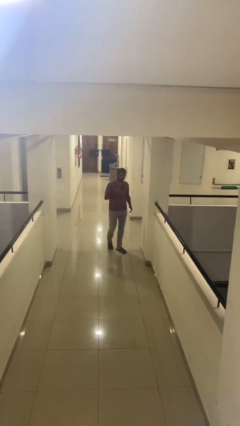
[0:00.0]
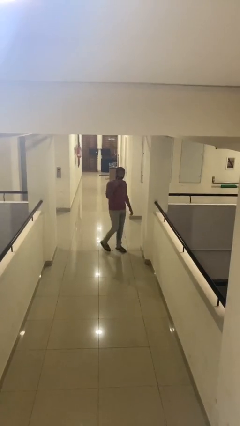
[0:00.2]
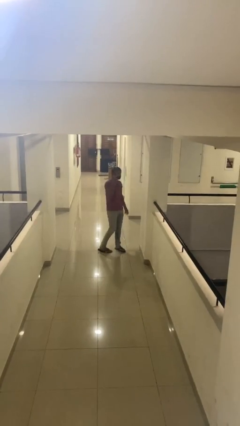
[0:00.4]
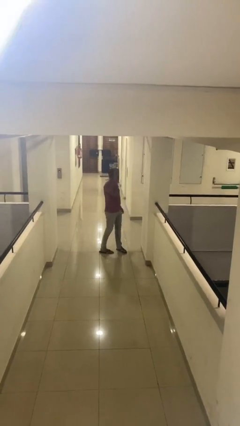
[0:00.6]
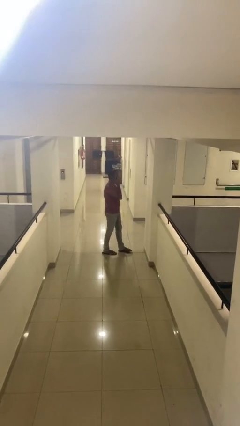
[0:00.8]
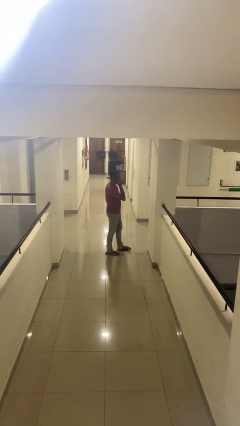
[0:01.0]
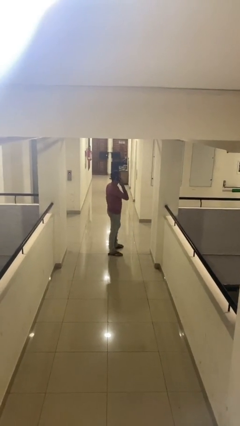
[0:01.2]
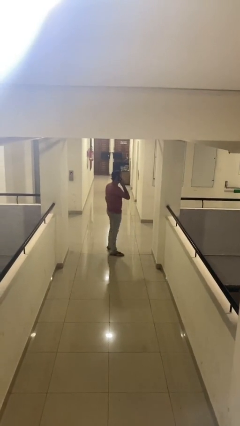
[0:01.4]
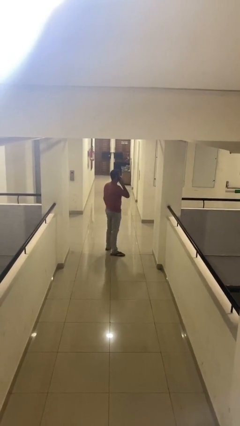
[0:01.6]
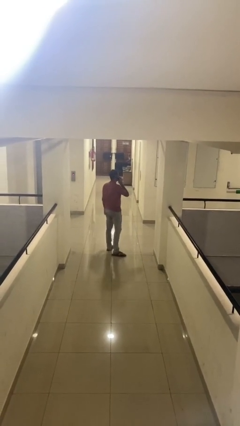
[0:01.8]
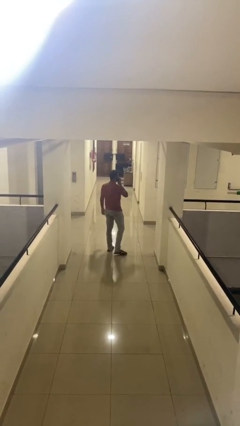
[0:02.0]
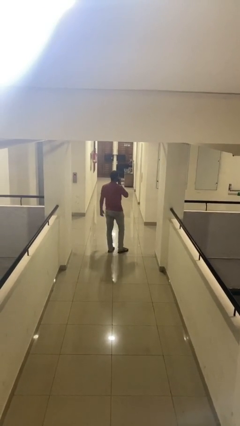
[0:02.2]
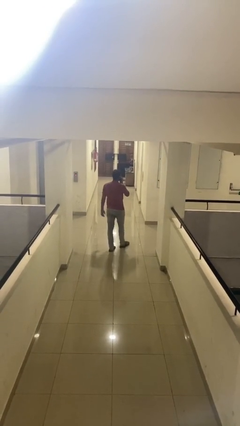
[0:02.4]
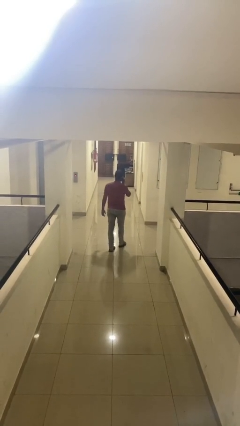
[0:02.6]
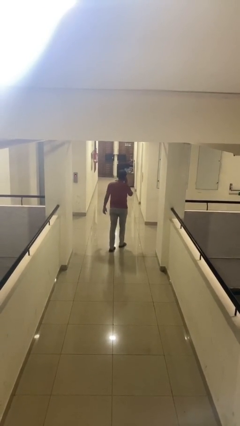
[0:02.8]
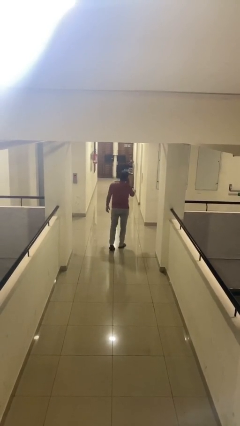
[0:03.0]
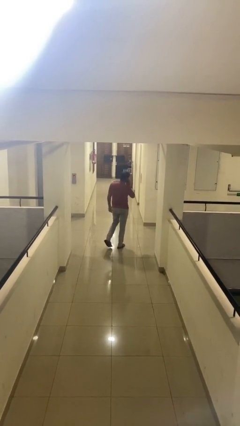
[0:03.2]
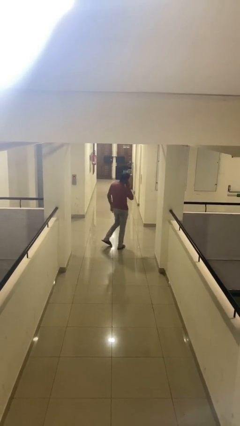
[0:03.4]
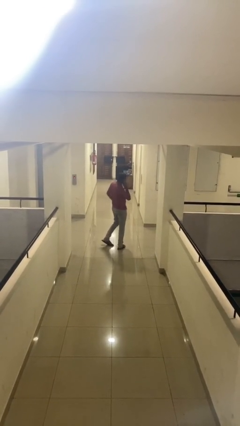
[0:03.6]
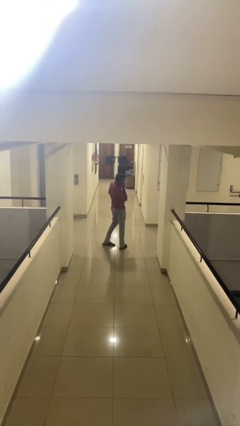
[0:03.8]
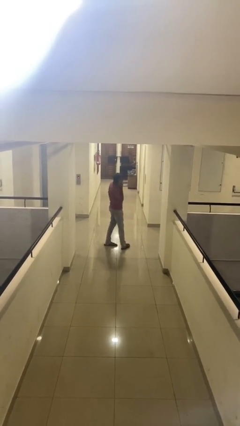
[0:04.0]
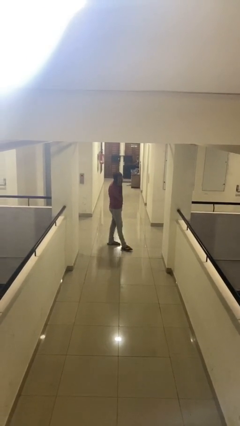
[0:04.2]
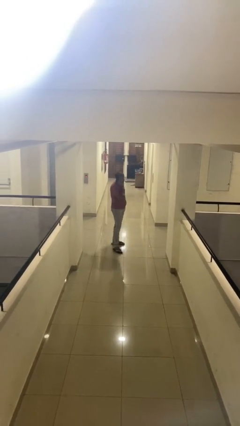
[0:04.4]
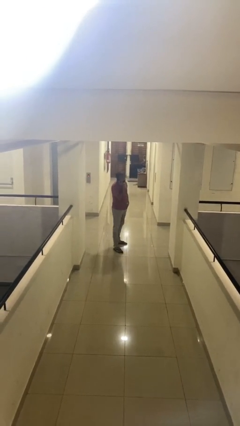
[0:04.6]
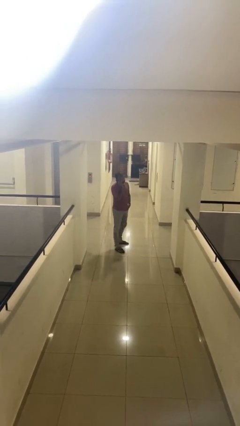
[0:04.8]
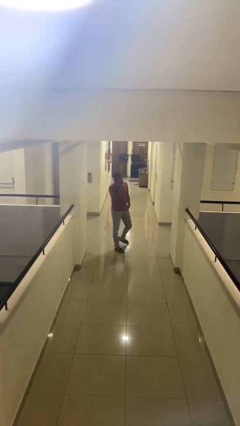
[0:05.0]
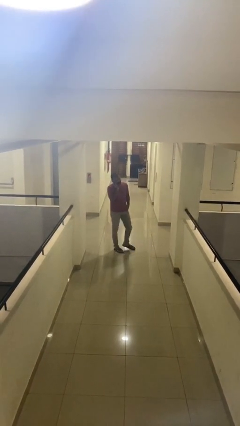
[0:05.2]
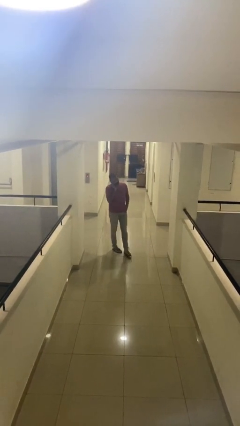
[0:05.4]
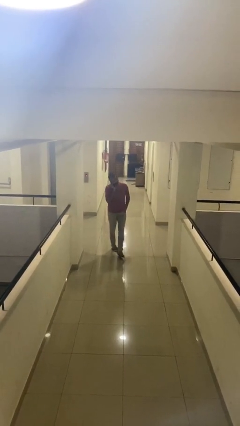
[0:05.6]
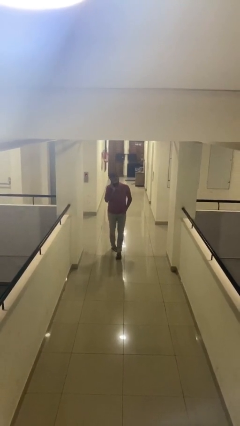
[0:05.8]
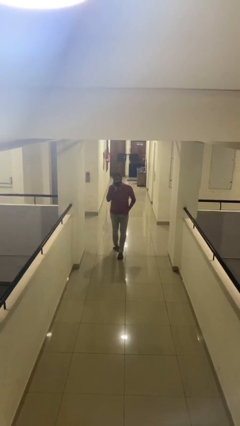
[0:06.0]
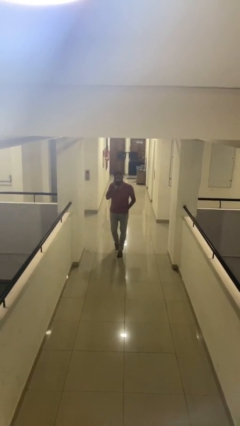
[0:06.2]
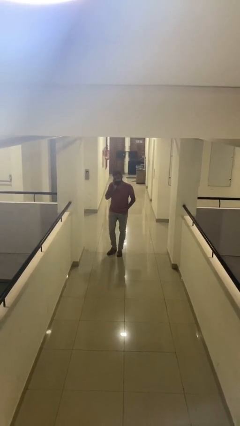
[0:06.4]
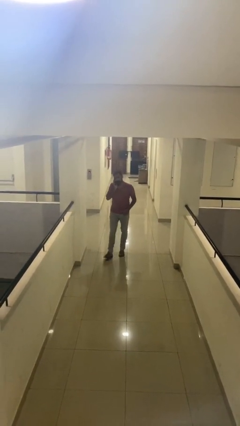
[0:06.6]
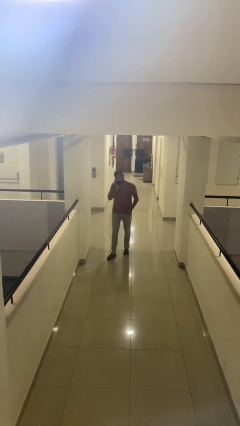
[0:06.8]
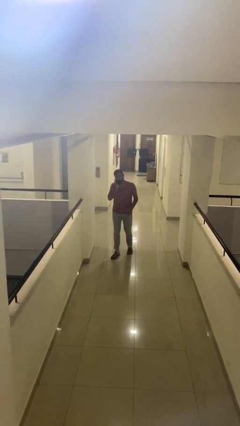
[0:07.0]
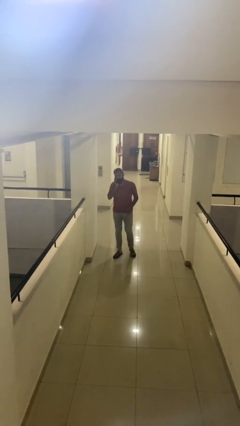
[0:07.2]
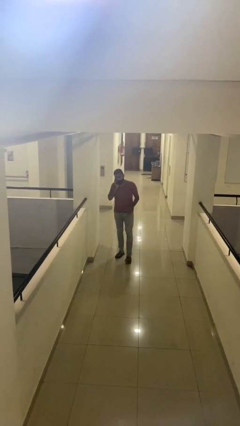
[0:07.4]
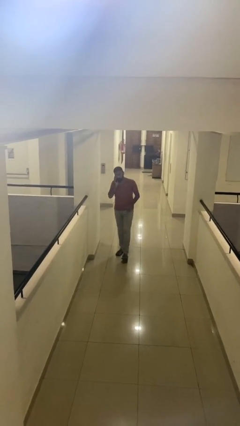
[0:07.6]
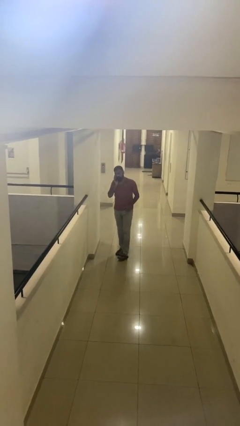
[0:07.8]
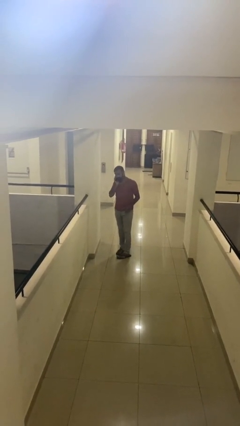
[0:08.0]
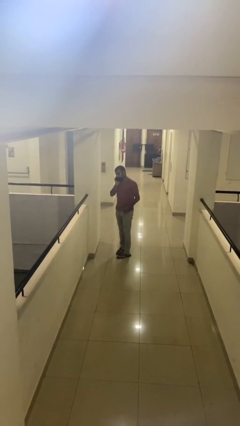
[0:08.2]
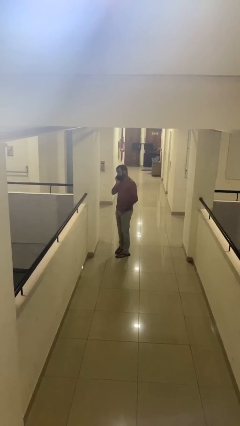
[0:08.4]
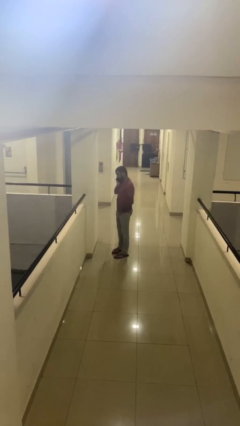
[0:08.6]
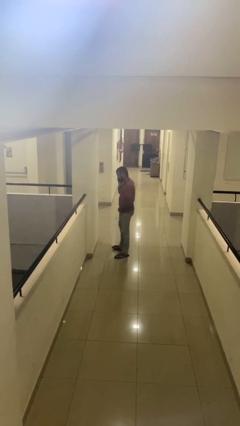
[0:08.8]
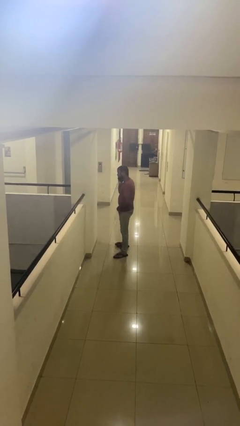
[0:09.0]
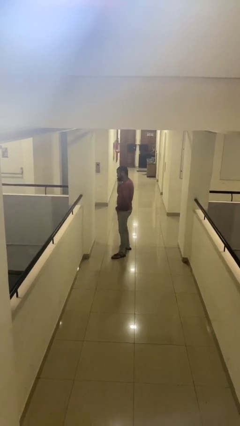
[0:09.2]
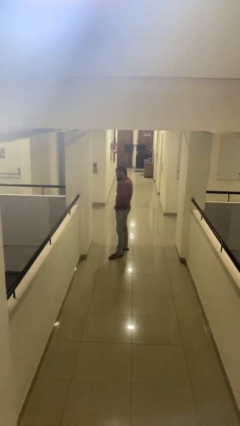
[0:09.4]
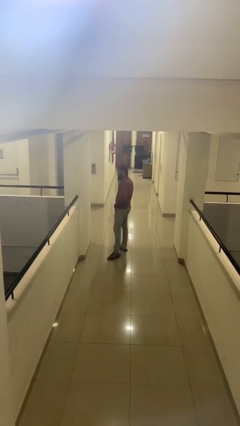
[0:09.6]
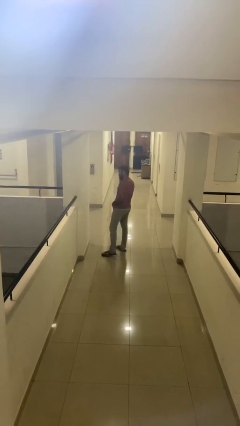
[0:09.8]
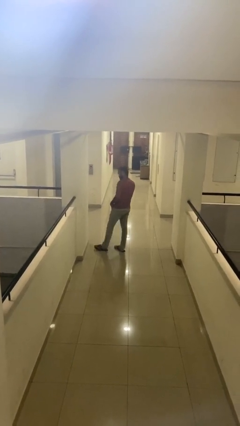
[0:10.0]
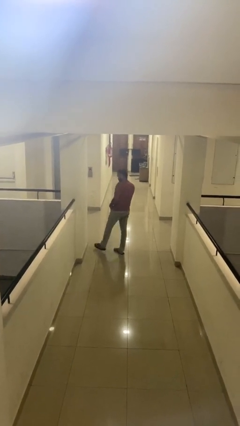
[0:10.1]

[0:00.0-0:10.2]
person talks on phone

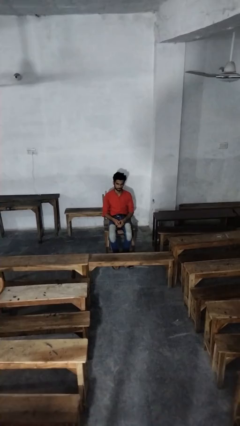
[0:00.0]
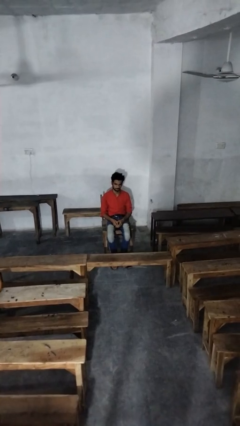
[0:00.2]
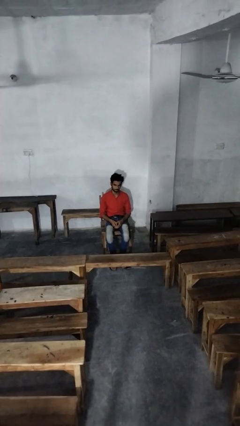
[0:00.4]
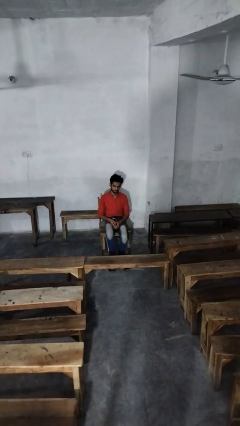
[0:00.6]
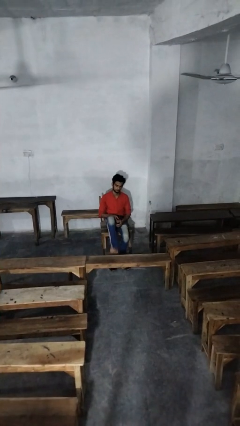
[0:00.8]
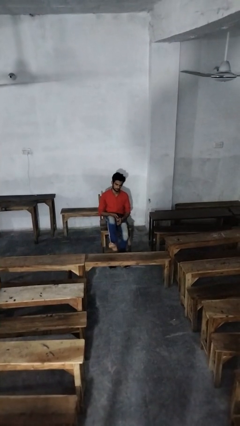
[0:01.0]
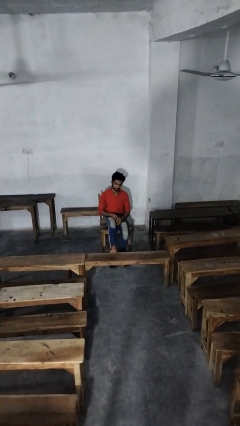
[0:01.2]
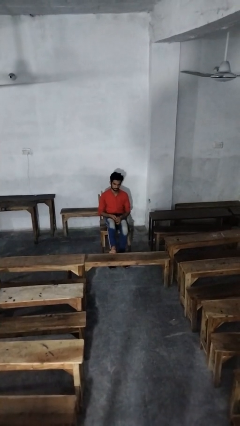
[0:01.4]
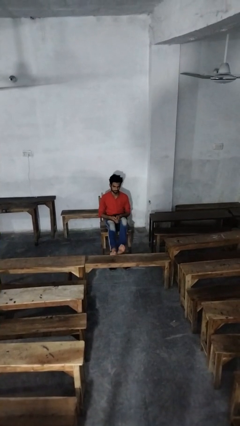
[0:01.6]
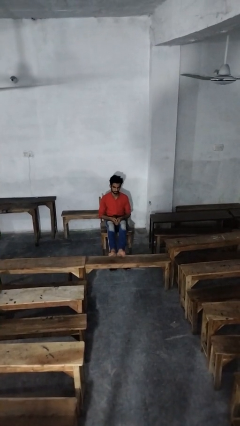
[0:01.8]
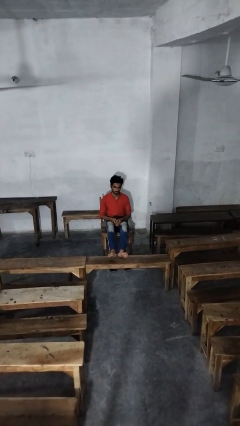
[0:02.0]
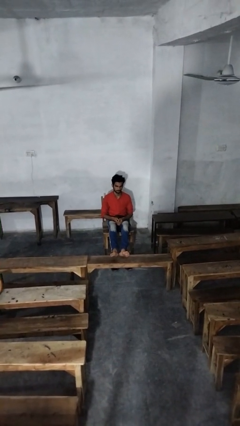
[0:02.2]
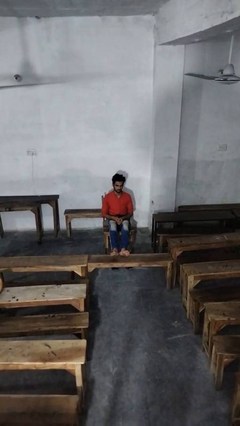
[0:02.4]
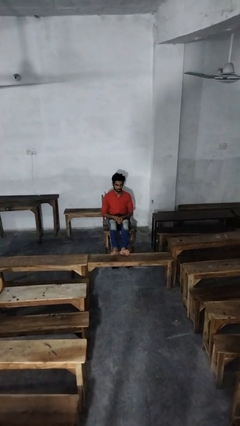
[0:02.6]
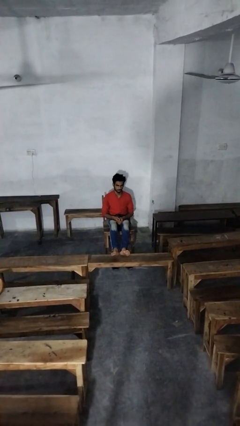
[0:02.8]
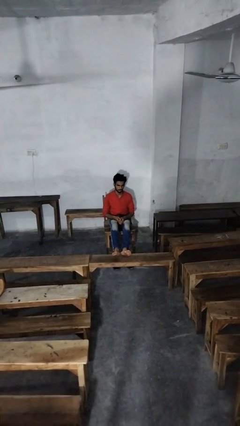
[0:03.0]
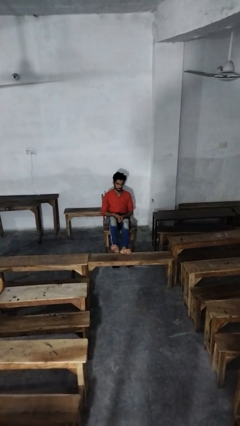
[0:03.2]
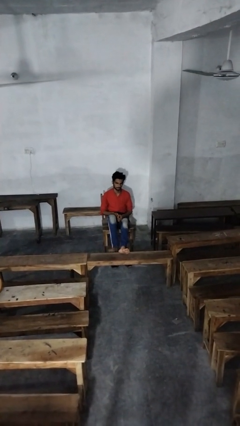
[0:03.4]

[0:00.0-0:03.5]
person puts feet up

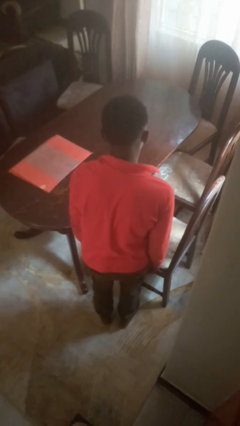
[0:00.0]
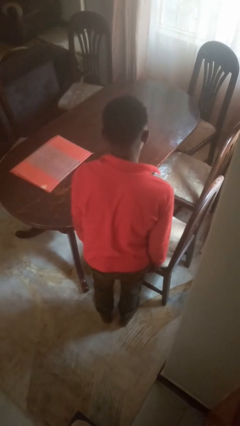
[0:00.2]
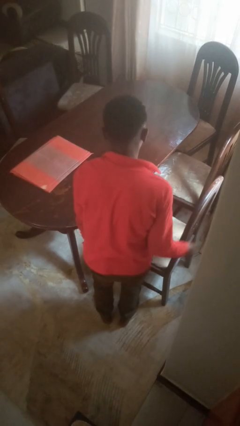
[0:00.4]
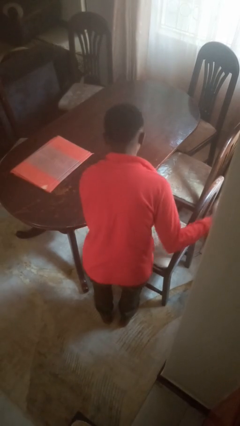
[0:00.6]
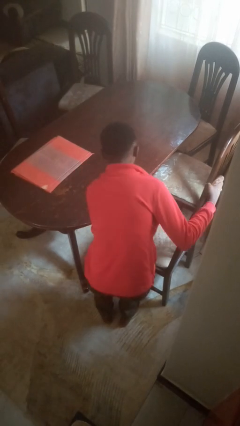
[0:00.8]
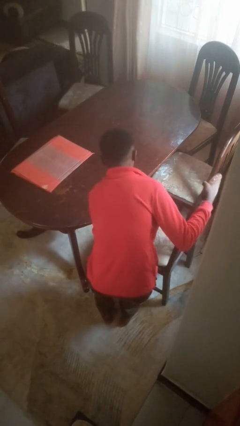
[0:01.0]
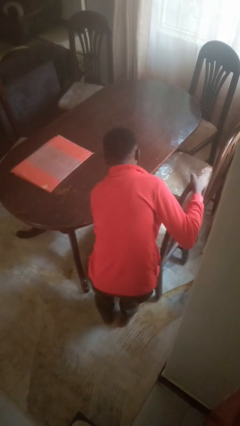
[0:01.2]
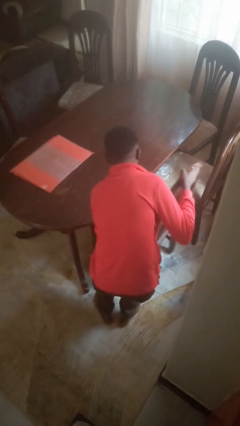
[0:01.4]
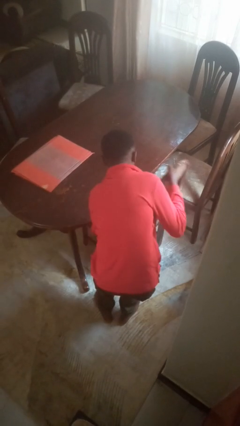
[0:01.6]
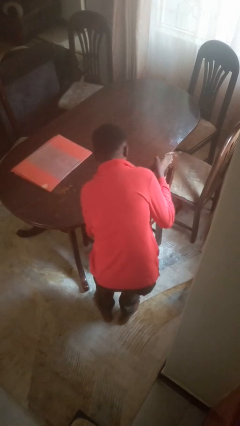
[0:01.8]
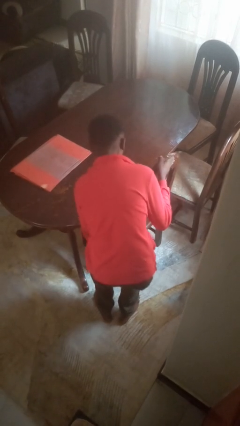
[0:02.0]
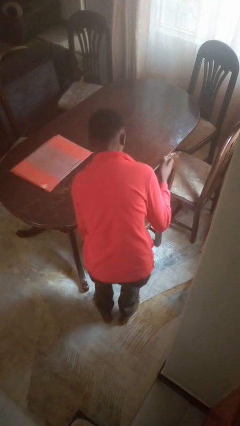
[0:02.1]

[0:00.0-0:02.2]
person pushes in chair

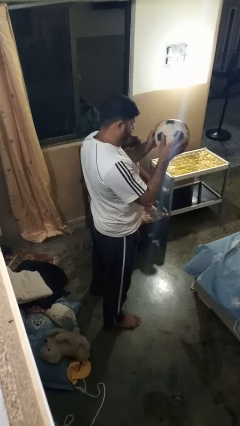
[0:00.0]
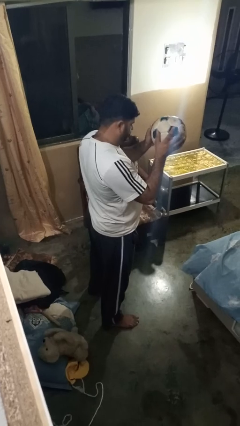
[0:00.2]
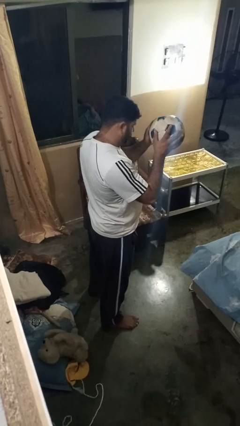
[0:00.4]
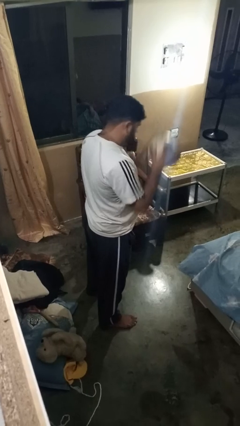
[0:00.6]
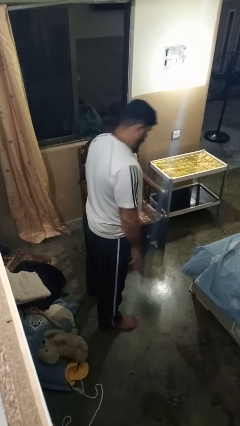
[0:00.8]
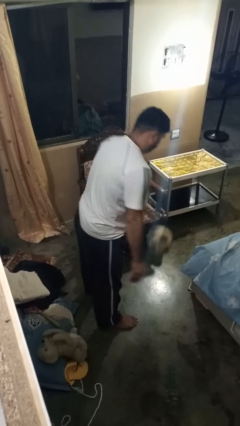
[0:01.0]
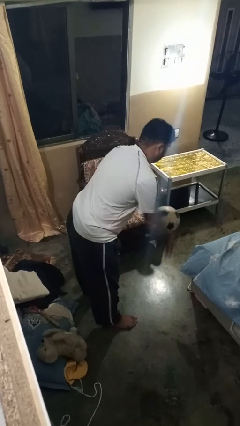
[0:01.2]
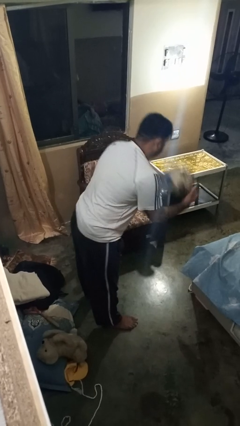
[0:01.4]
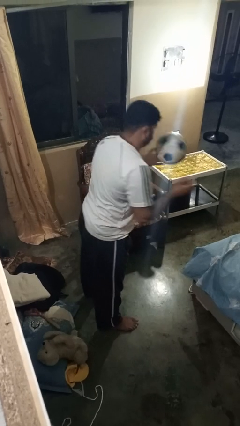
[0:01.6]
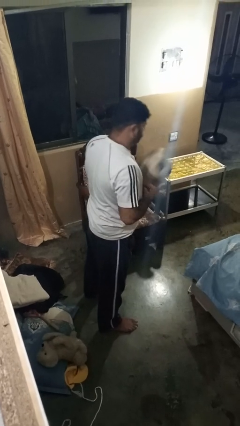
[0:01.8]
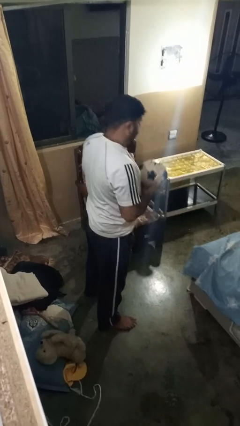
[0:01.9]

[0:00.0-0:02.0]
person bounces ball on floor
